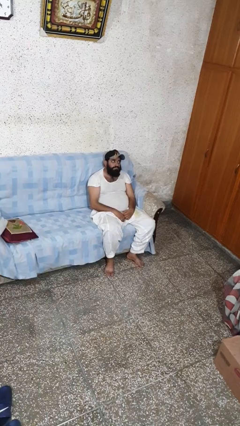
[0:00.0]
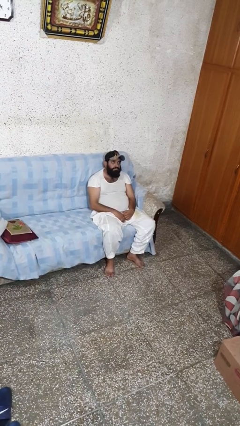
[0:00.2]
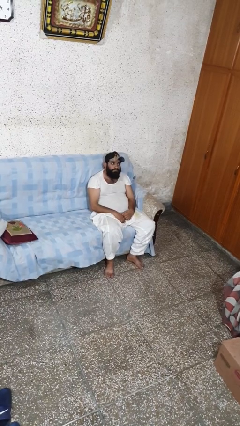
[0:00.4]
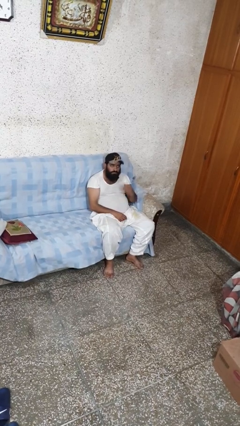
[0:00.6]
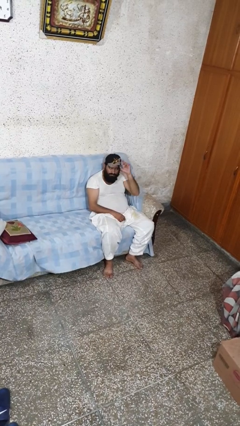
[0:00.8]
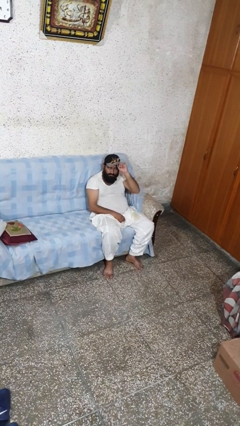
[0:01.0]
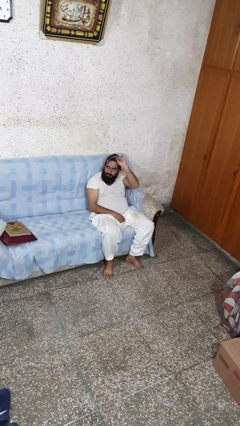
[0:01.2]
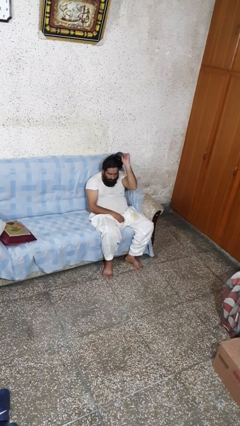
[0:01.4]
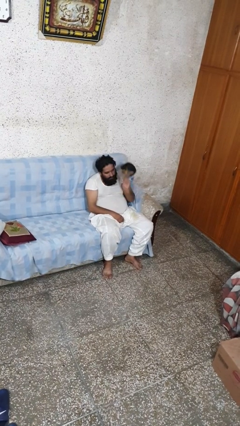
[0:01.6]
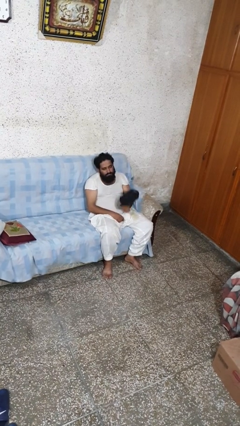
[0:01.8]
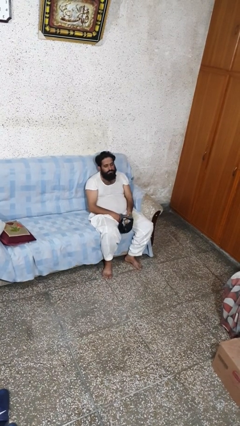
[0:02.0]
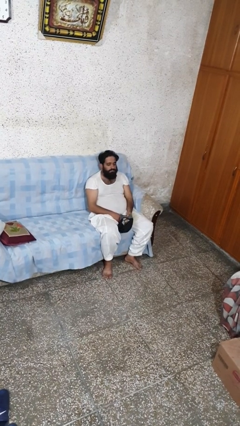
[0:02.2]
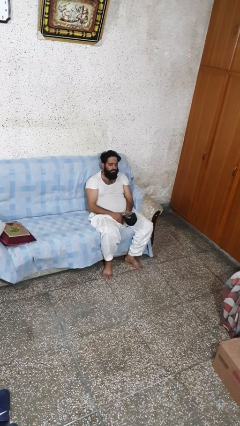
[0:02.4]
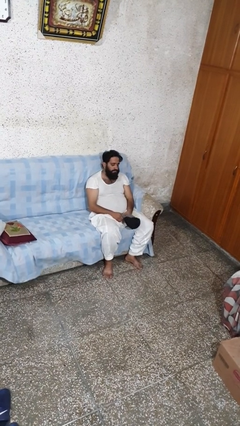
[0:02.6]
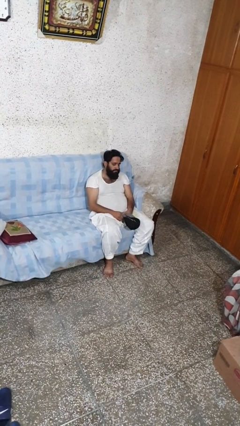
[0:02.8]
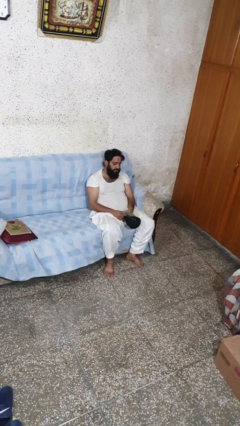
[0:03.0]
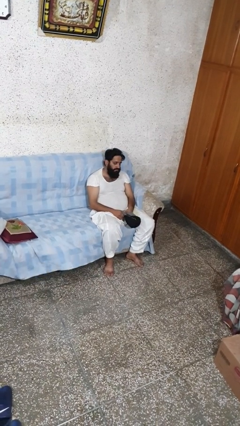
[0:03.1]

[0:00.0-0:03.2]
person takes off hat

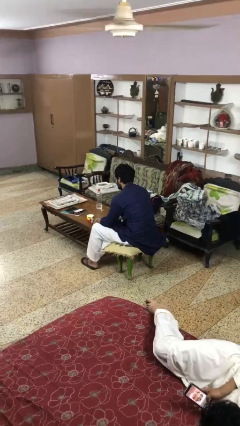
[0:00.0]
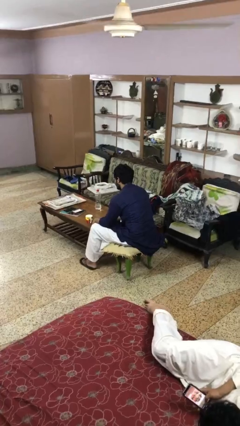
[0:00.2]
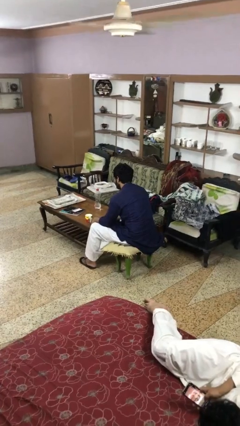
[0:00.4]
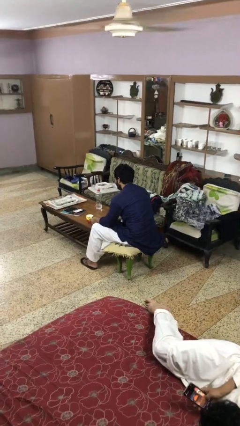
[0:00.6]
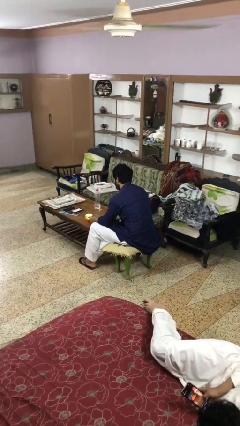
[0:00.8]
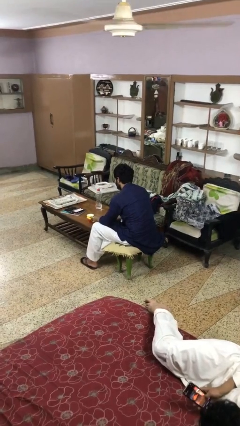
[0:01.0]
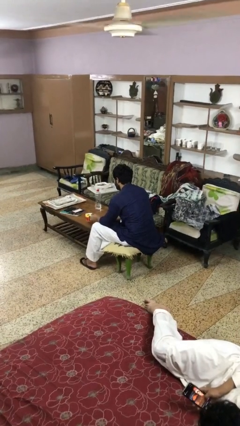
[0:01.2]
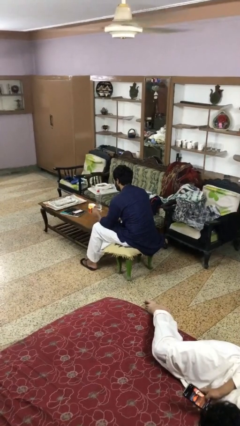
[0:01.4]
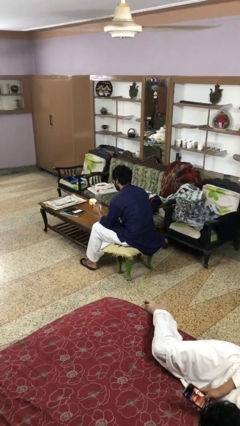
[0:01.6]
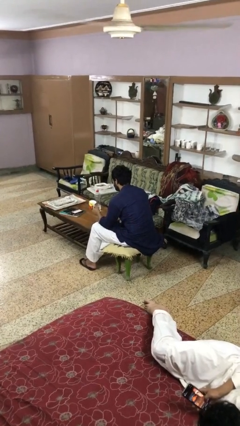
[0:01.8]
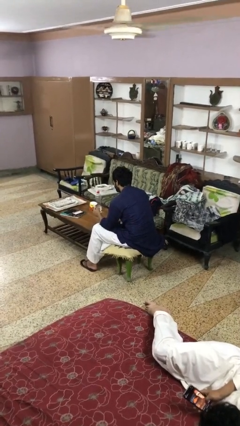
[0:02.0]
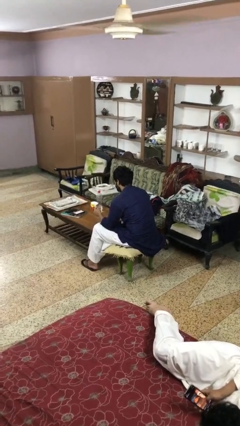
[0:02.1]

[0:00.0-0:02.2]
person picks up object from table

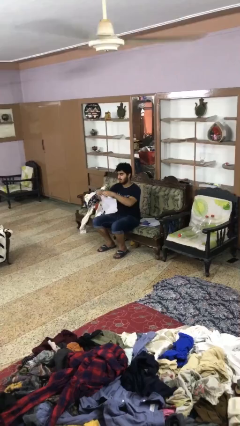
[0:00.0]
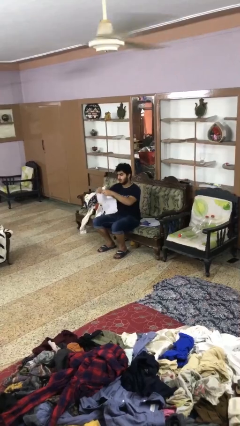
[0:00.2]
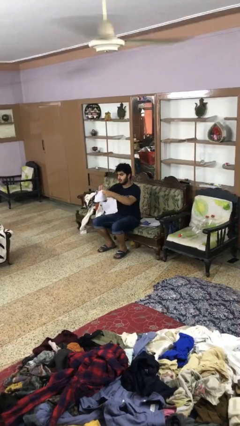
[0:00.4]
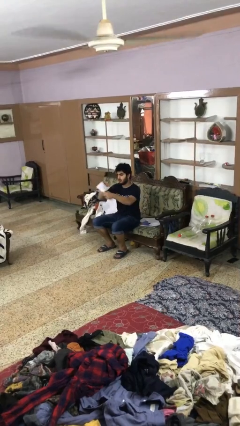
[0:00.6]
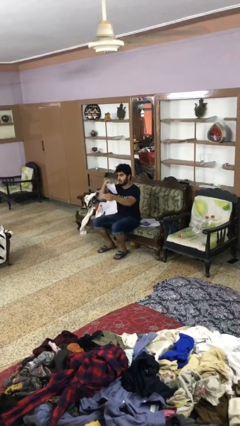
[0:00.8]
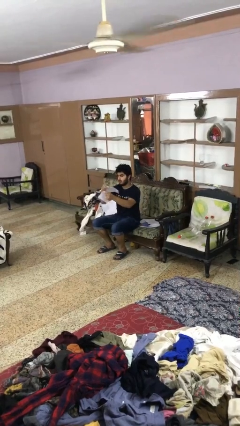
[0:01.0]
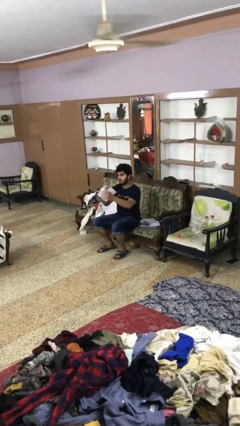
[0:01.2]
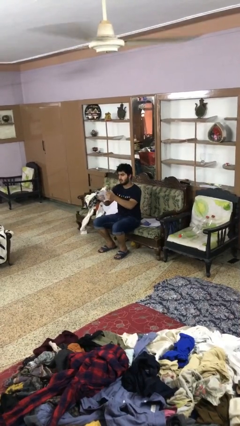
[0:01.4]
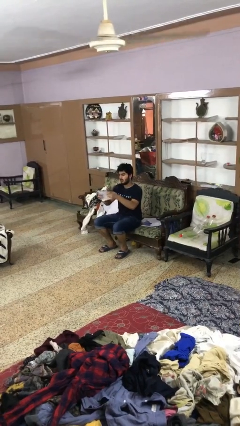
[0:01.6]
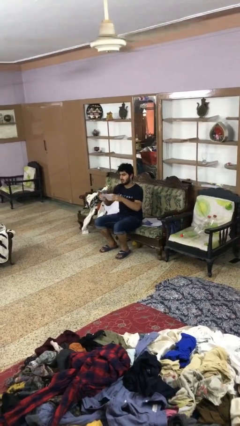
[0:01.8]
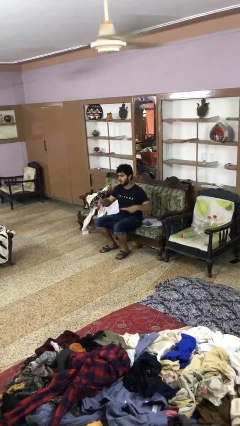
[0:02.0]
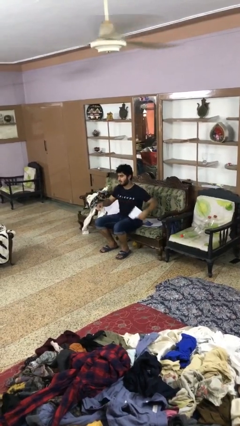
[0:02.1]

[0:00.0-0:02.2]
person tears paper

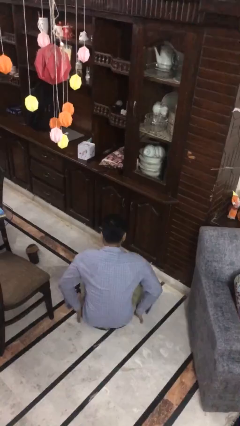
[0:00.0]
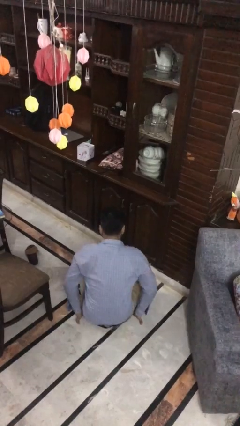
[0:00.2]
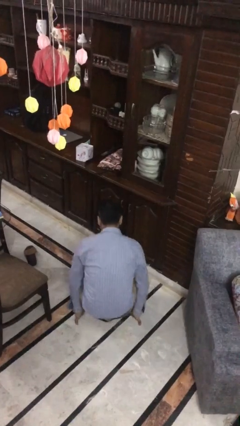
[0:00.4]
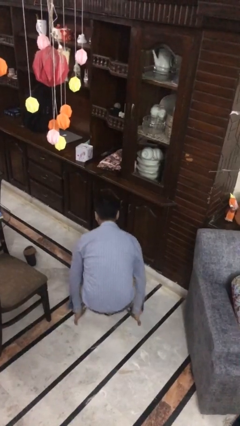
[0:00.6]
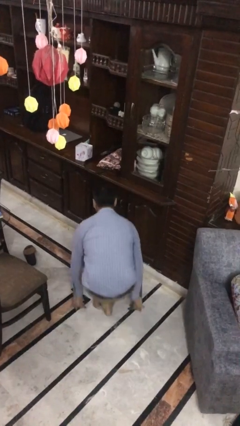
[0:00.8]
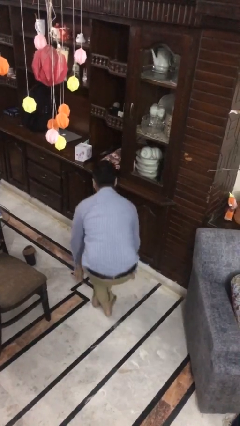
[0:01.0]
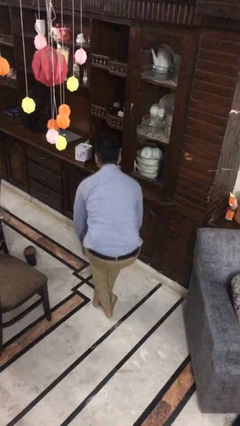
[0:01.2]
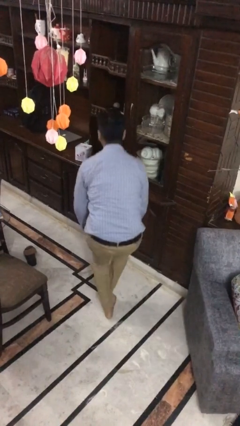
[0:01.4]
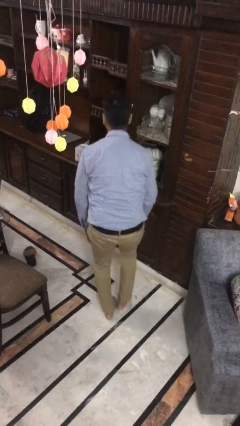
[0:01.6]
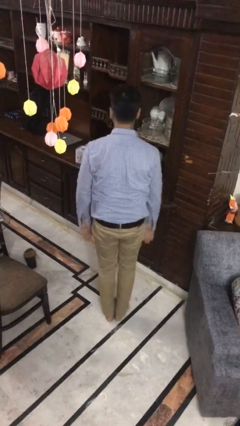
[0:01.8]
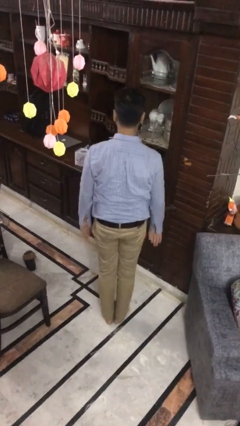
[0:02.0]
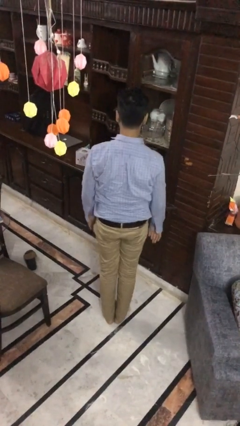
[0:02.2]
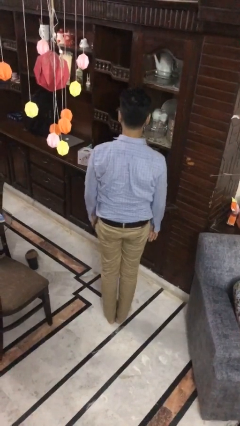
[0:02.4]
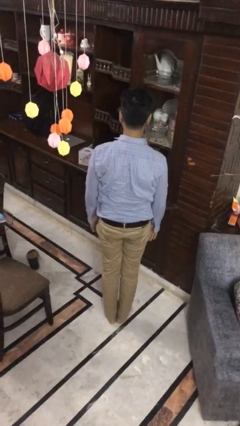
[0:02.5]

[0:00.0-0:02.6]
person stands up from floor

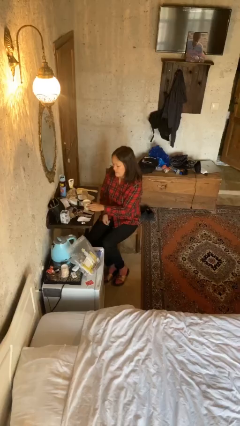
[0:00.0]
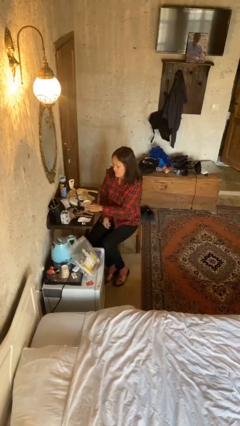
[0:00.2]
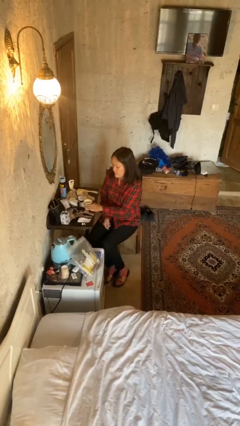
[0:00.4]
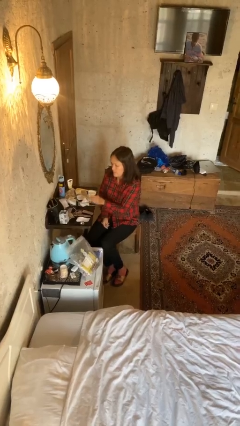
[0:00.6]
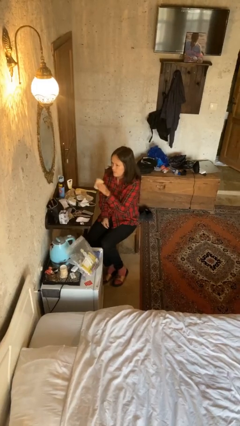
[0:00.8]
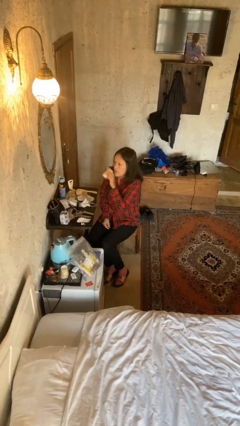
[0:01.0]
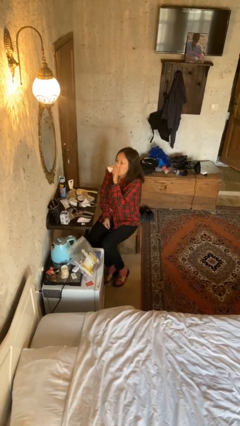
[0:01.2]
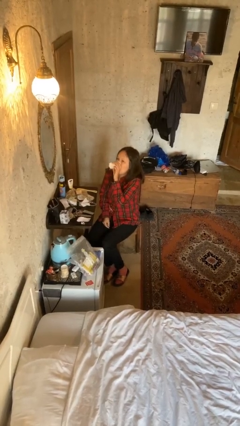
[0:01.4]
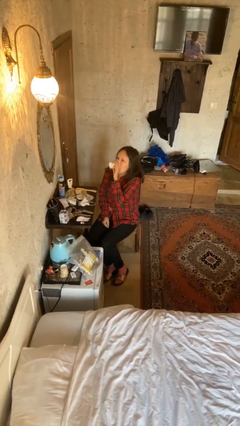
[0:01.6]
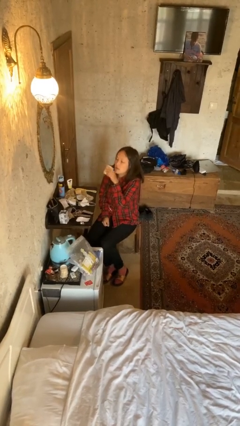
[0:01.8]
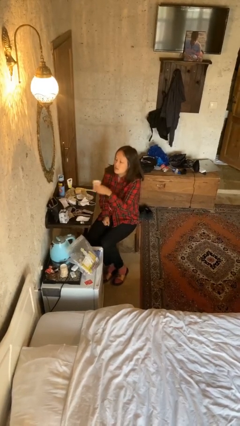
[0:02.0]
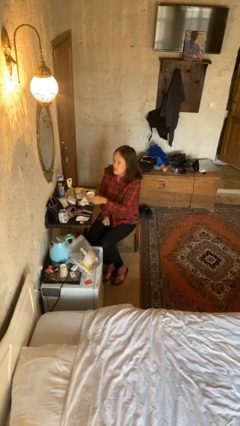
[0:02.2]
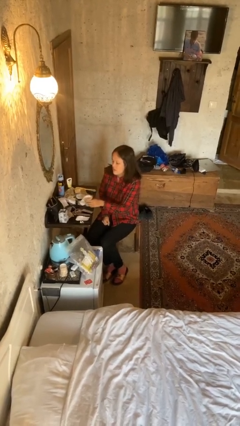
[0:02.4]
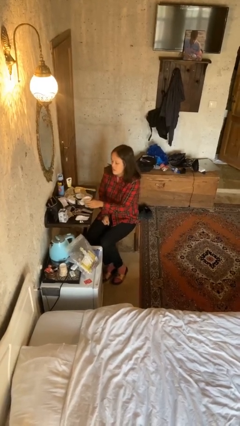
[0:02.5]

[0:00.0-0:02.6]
person drinks from cup

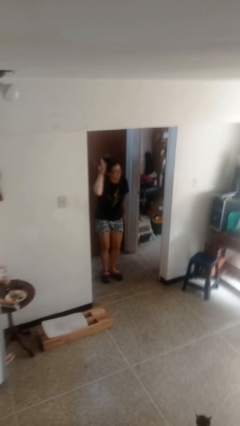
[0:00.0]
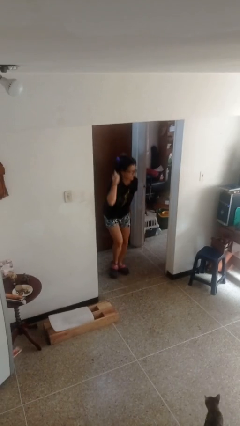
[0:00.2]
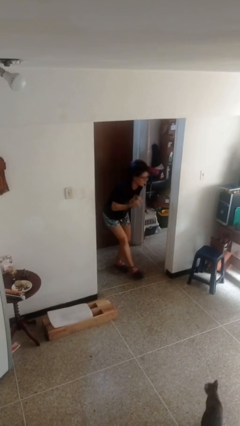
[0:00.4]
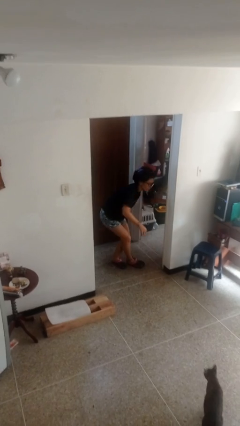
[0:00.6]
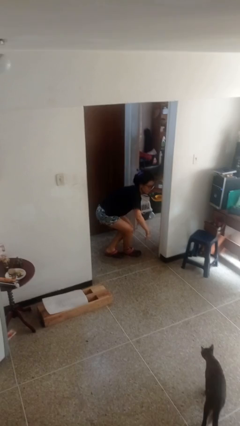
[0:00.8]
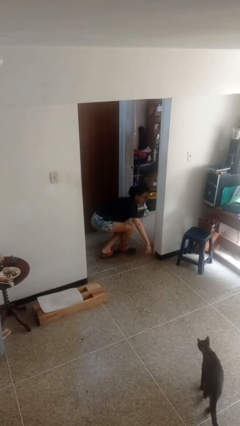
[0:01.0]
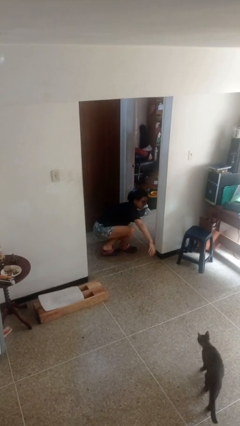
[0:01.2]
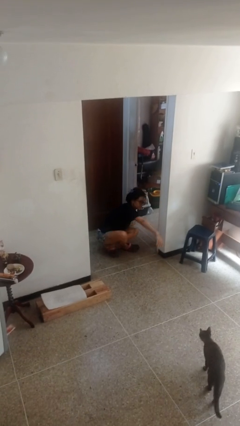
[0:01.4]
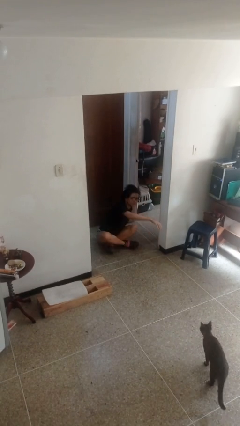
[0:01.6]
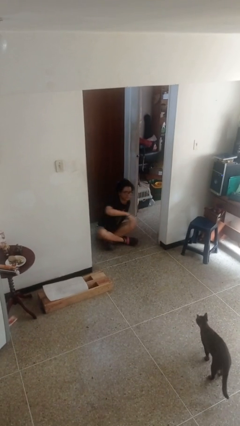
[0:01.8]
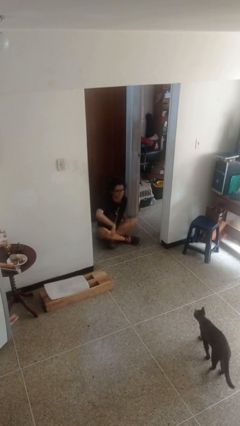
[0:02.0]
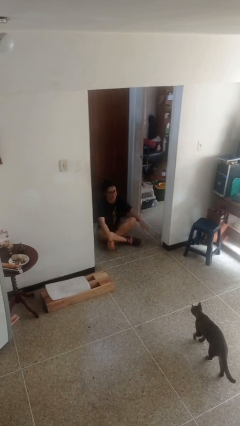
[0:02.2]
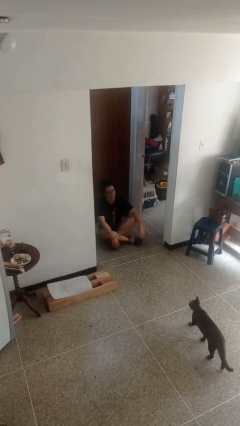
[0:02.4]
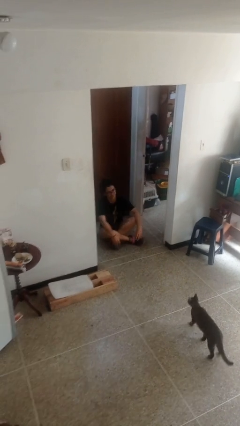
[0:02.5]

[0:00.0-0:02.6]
person sits crisscross

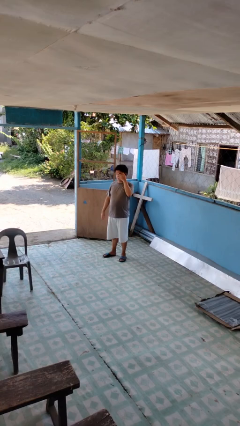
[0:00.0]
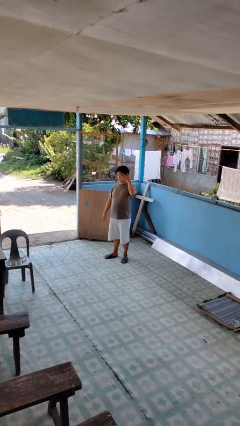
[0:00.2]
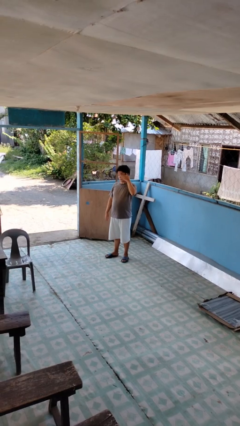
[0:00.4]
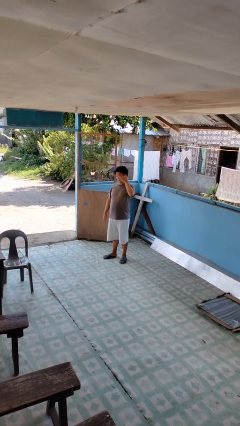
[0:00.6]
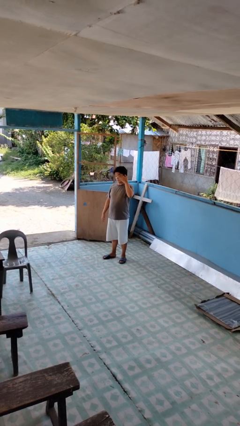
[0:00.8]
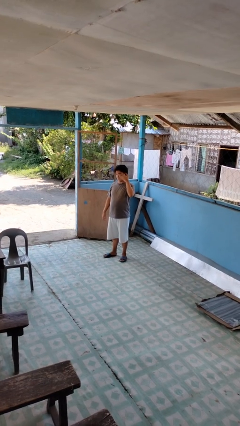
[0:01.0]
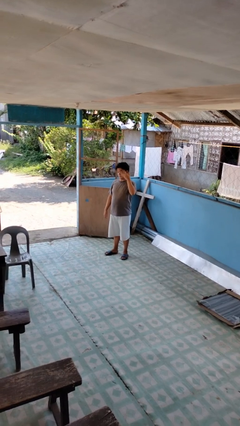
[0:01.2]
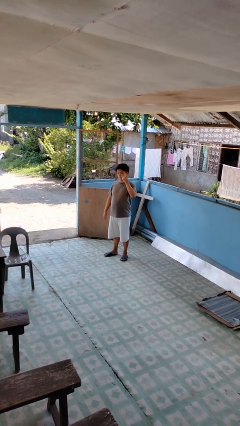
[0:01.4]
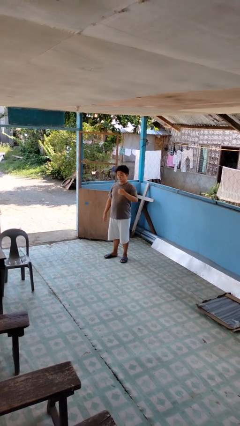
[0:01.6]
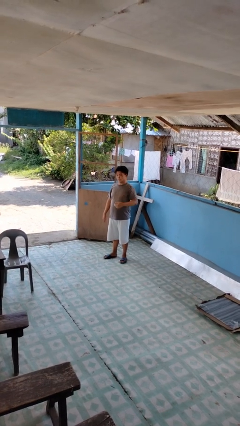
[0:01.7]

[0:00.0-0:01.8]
person rubs eyes
